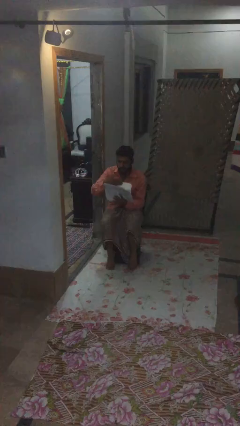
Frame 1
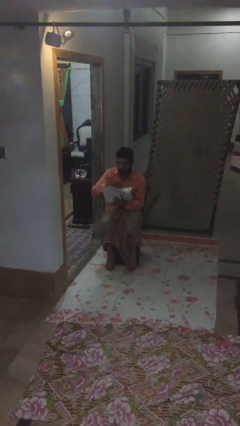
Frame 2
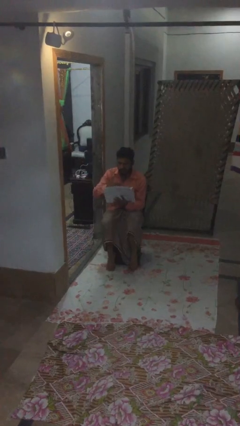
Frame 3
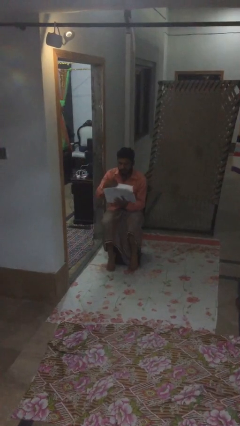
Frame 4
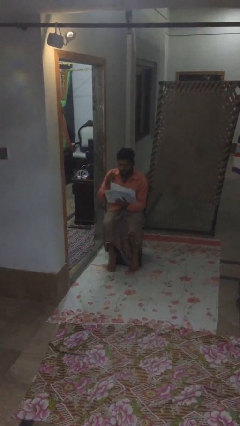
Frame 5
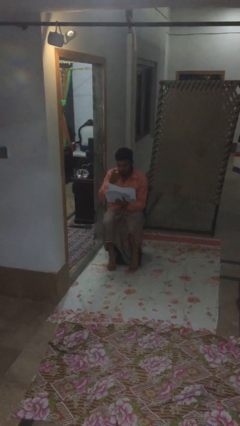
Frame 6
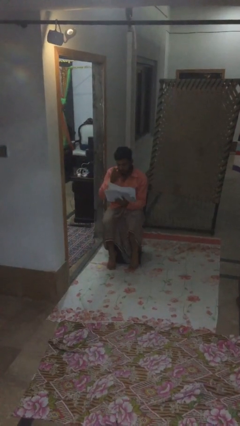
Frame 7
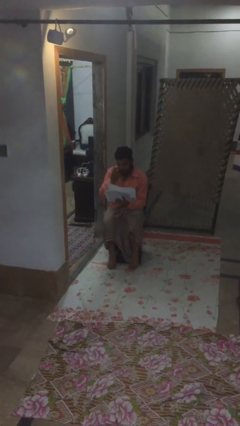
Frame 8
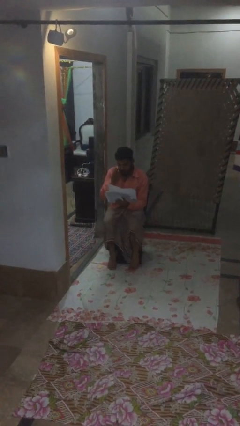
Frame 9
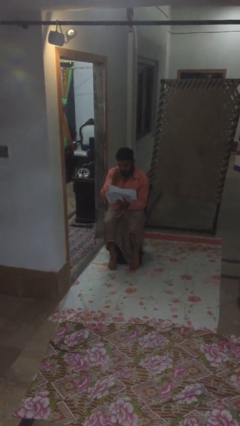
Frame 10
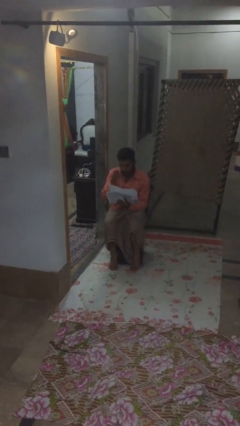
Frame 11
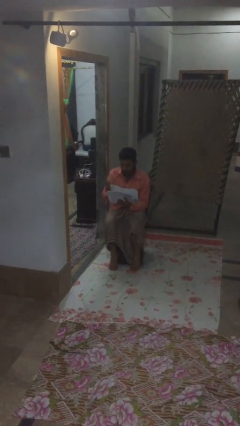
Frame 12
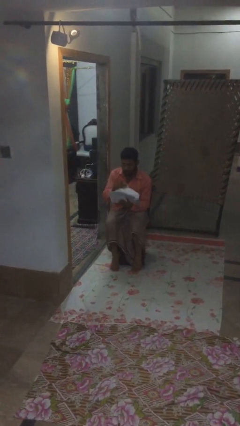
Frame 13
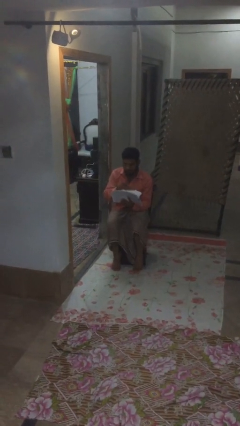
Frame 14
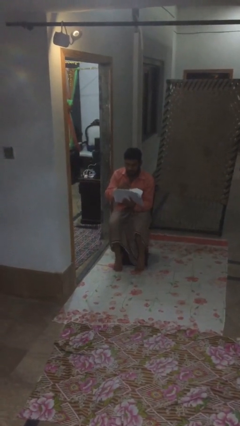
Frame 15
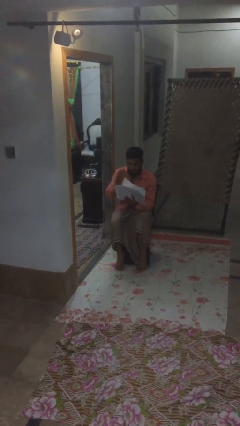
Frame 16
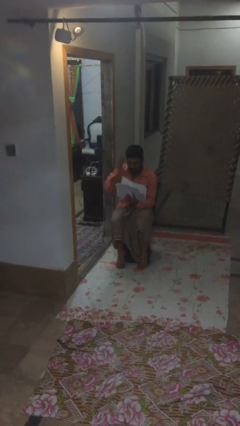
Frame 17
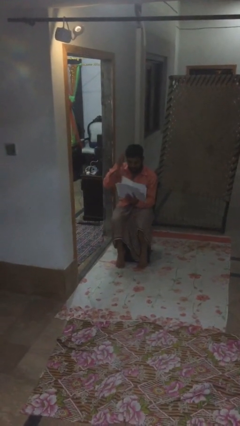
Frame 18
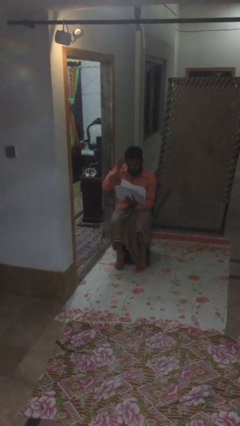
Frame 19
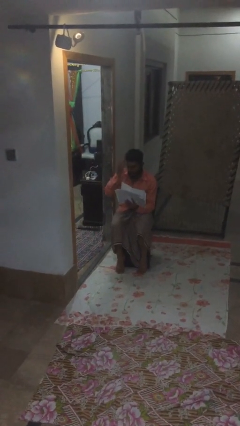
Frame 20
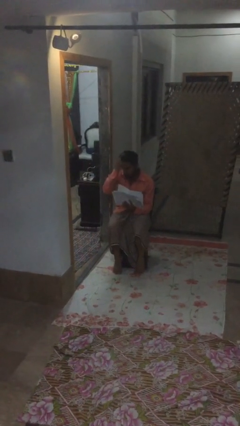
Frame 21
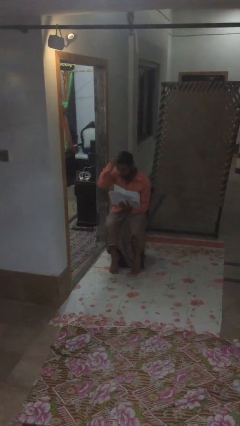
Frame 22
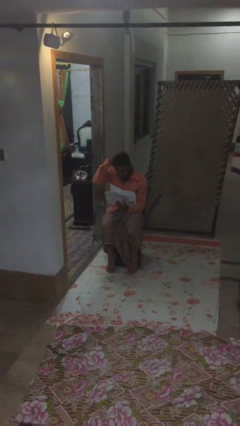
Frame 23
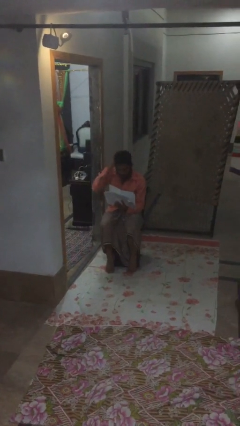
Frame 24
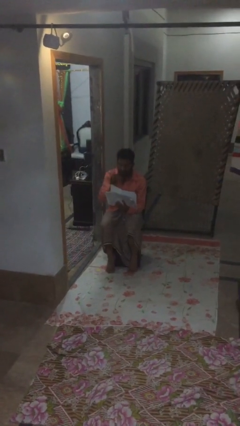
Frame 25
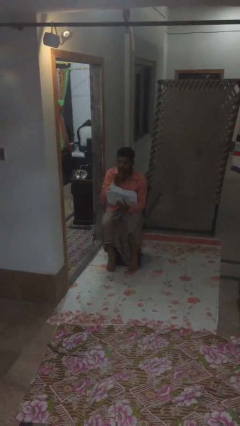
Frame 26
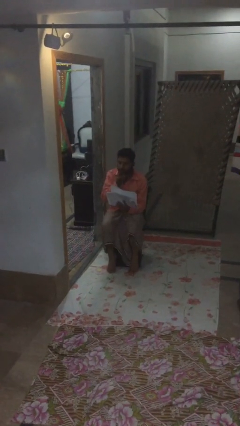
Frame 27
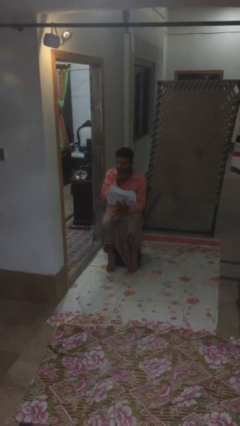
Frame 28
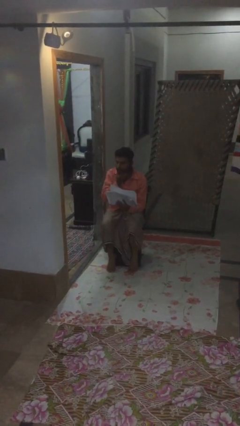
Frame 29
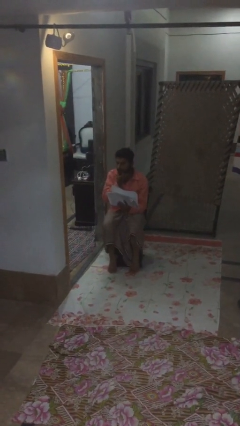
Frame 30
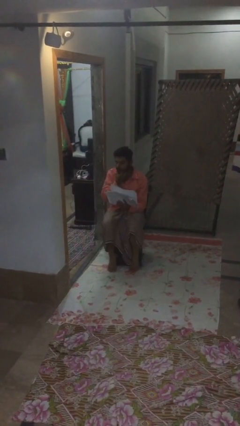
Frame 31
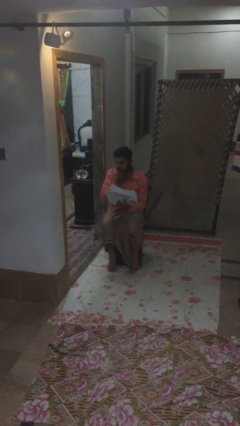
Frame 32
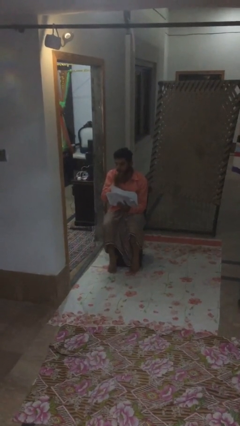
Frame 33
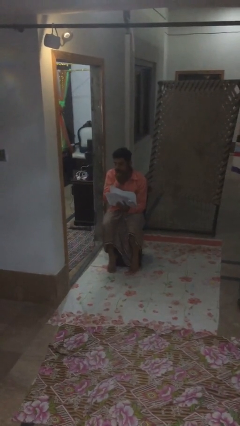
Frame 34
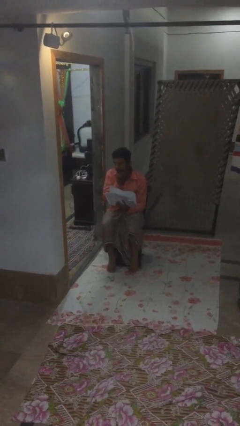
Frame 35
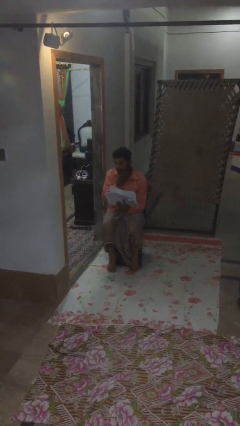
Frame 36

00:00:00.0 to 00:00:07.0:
person reads document

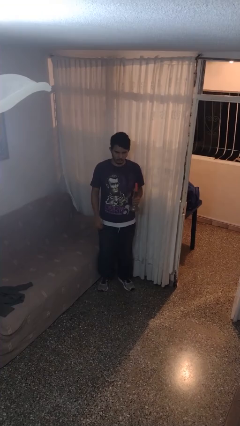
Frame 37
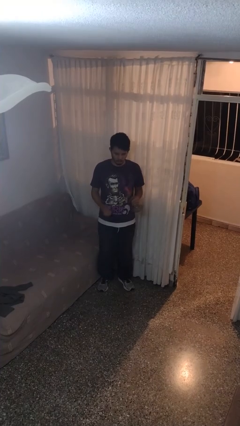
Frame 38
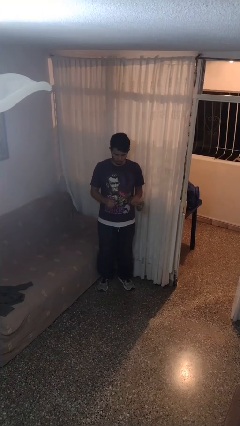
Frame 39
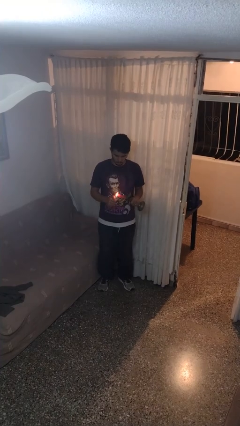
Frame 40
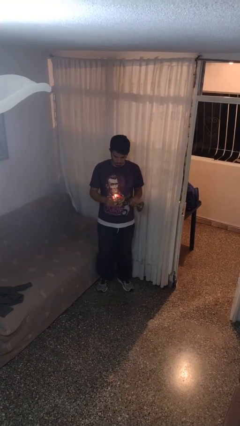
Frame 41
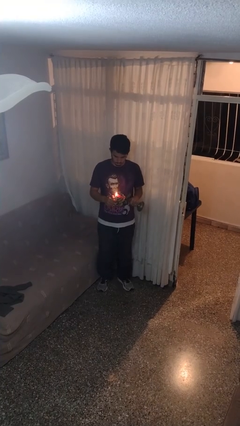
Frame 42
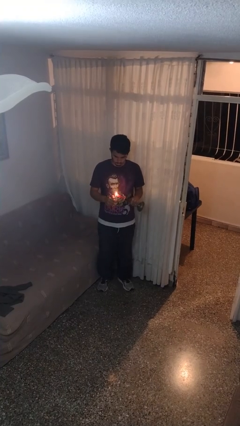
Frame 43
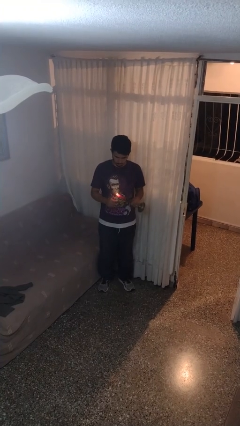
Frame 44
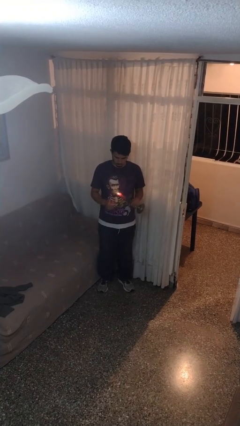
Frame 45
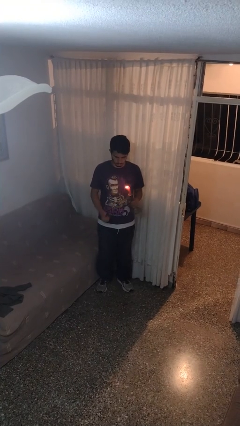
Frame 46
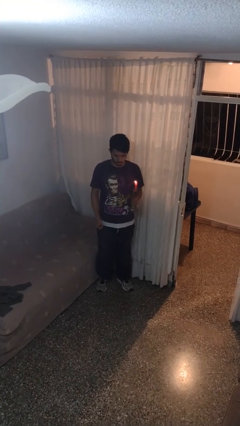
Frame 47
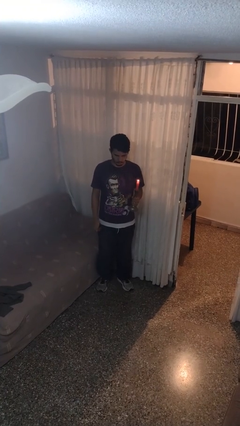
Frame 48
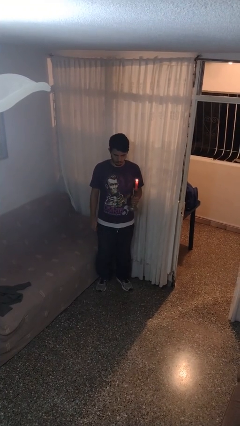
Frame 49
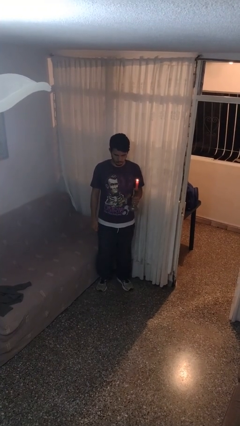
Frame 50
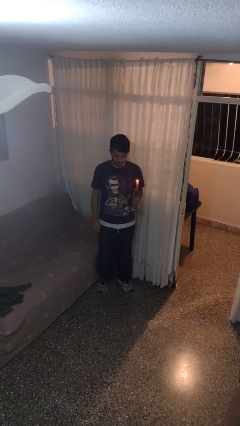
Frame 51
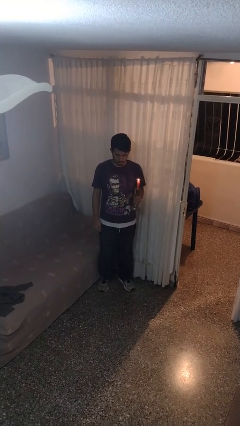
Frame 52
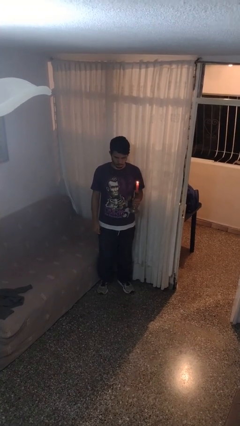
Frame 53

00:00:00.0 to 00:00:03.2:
person lights candle

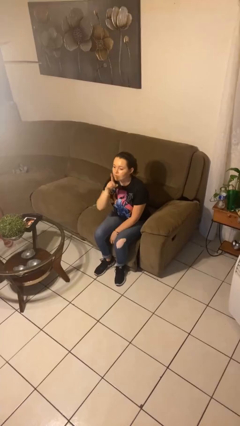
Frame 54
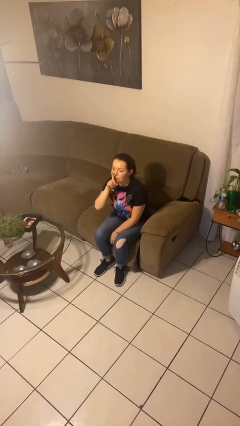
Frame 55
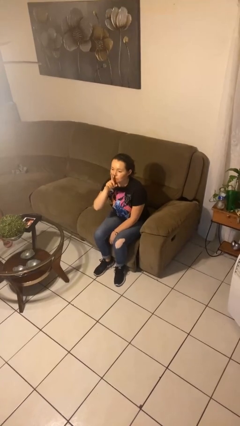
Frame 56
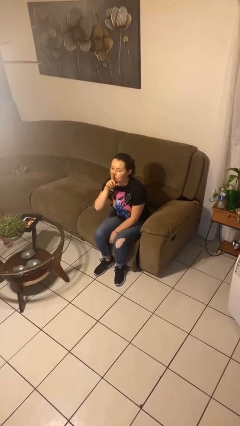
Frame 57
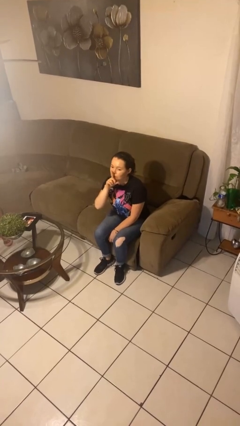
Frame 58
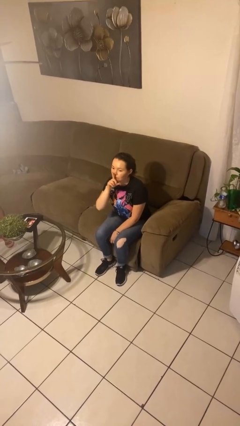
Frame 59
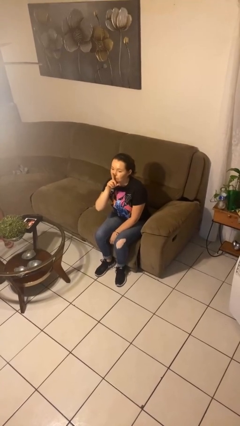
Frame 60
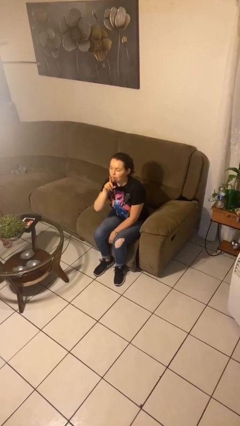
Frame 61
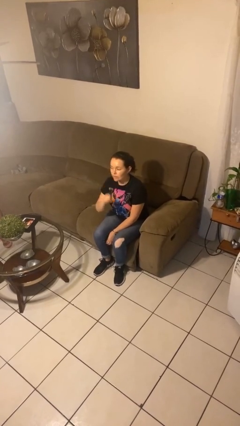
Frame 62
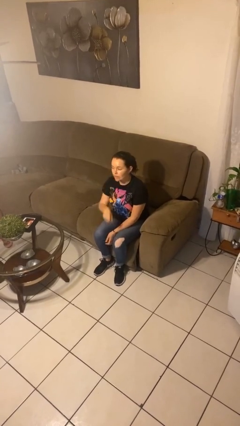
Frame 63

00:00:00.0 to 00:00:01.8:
person gestures be quiet

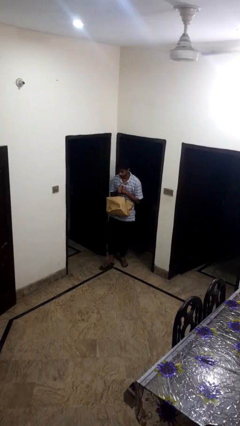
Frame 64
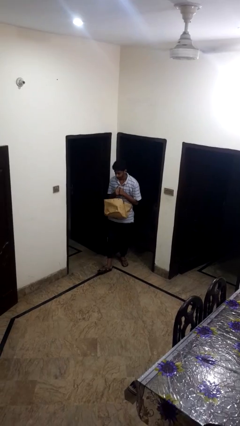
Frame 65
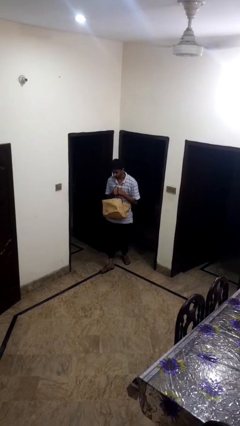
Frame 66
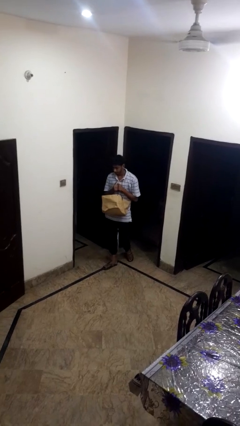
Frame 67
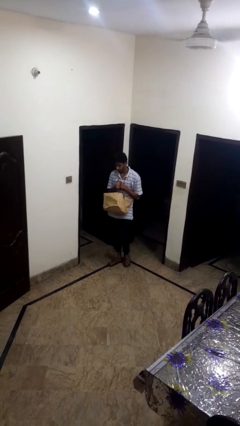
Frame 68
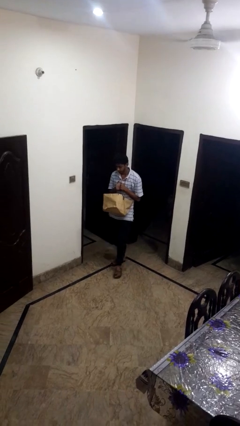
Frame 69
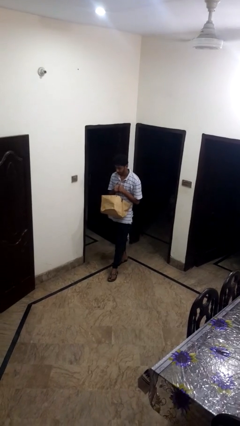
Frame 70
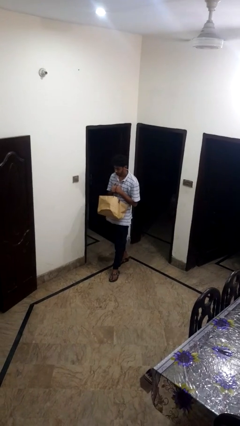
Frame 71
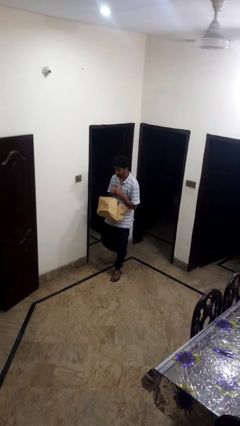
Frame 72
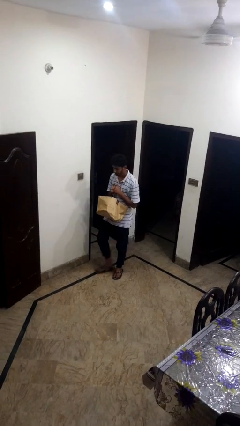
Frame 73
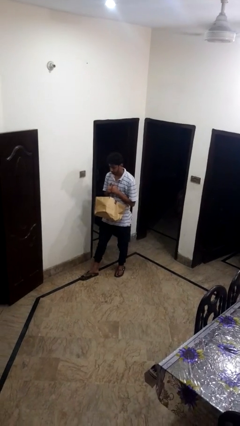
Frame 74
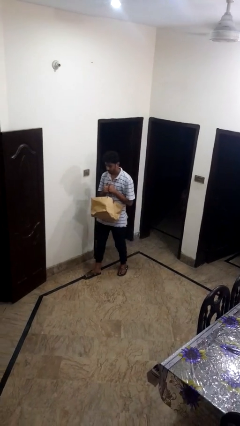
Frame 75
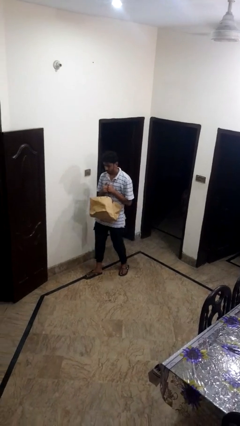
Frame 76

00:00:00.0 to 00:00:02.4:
person carries groceries

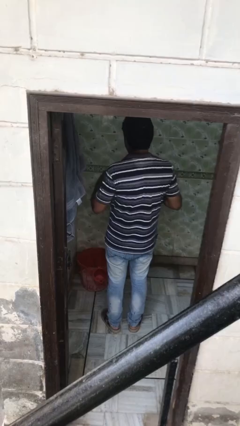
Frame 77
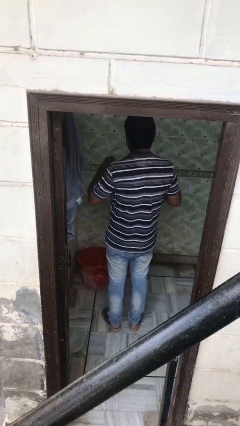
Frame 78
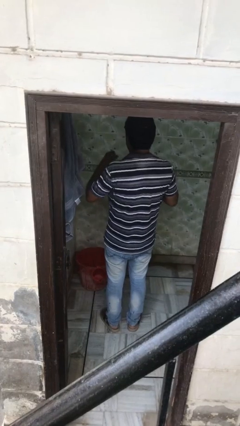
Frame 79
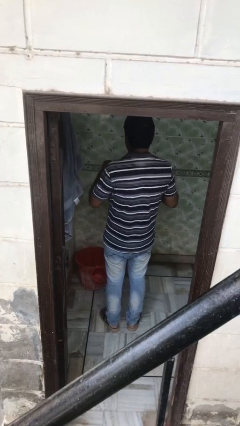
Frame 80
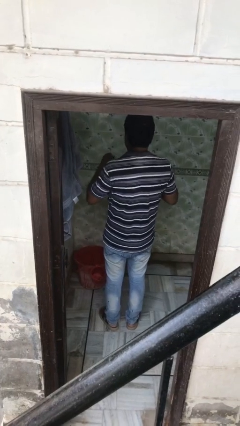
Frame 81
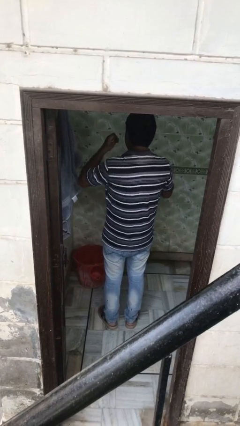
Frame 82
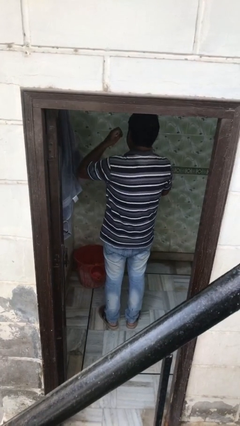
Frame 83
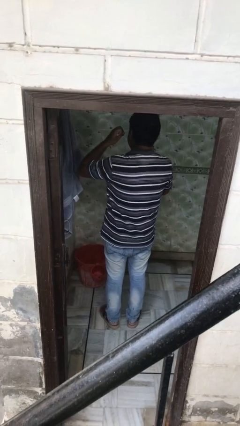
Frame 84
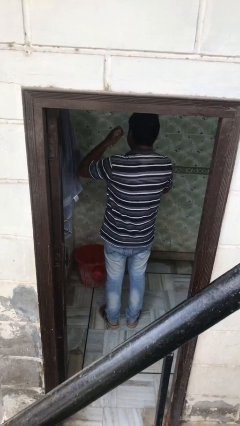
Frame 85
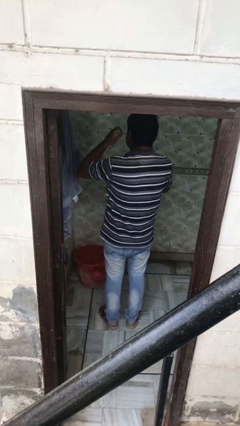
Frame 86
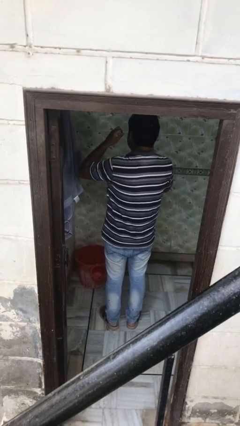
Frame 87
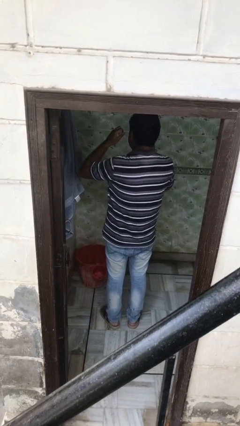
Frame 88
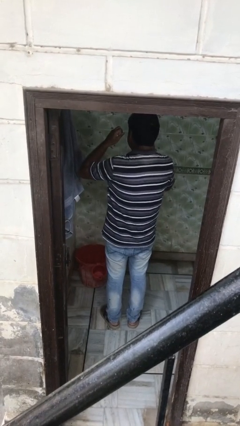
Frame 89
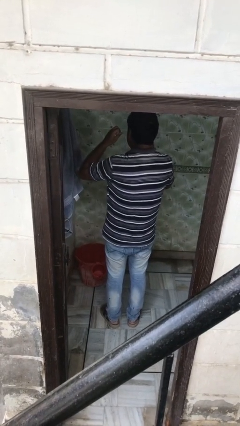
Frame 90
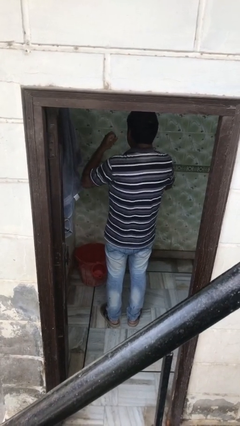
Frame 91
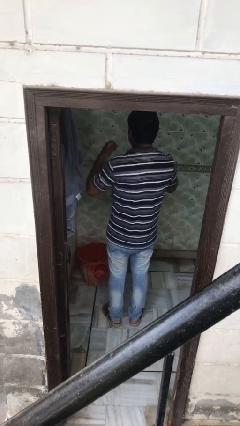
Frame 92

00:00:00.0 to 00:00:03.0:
person flosses

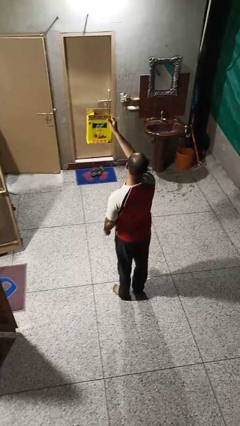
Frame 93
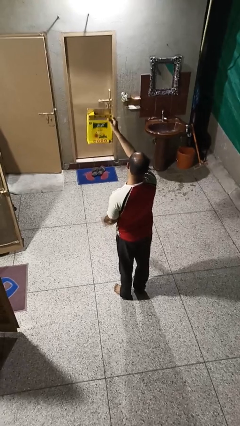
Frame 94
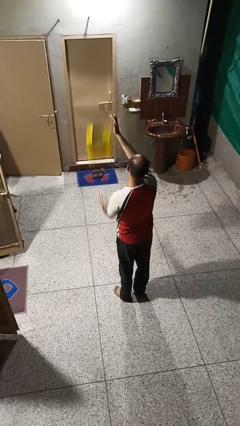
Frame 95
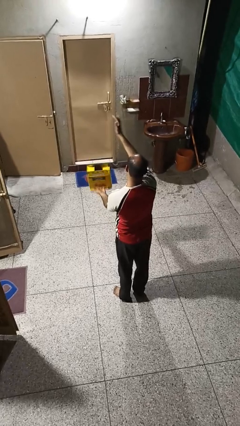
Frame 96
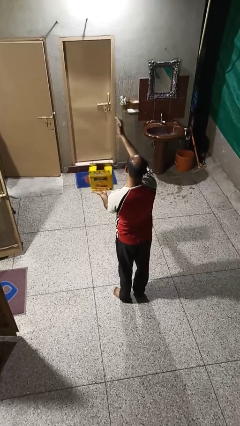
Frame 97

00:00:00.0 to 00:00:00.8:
person drops object
